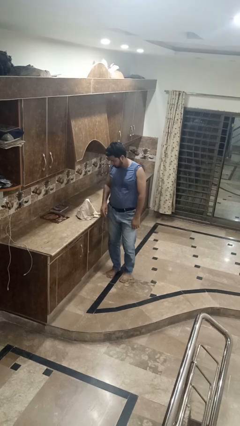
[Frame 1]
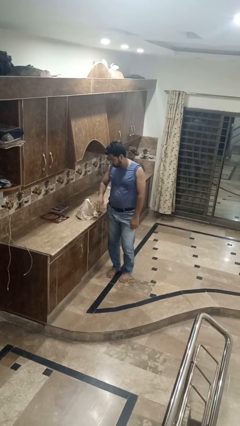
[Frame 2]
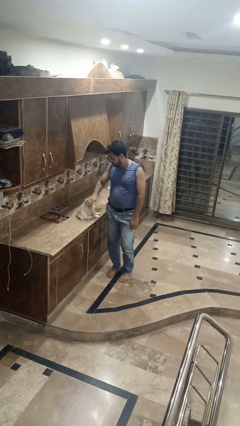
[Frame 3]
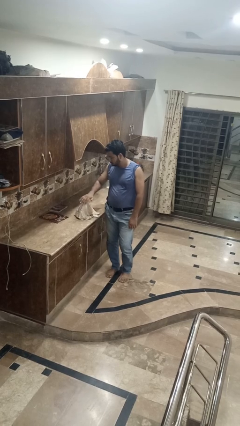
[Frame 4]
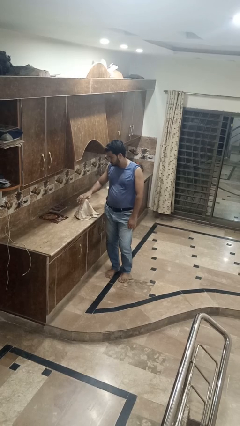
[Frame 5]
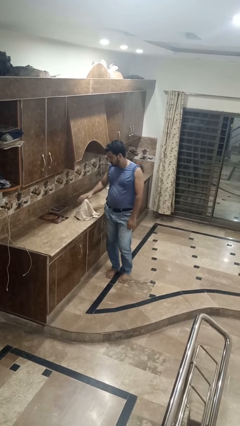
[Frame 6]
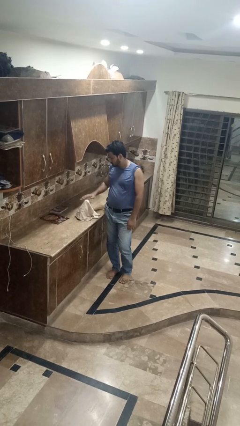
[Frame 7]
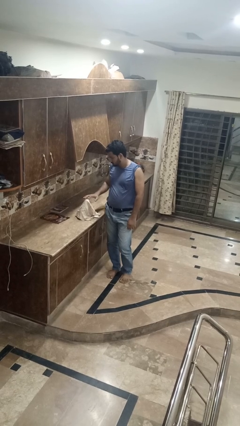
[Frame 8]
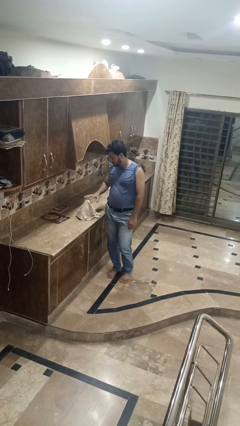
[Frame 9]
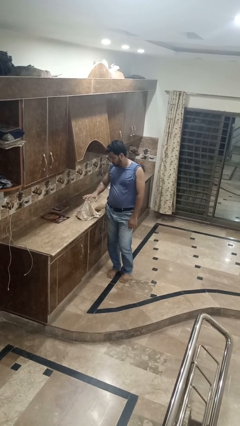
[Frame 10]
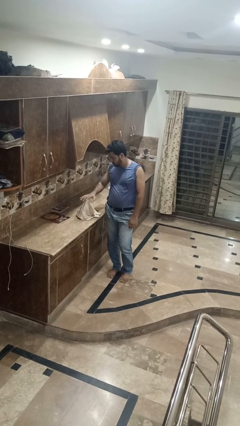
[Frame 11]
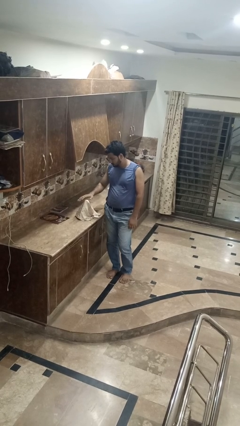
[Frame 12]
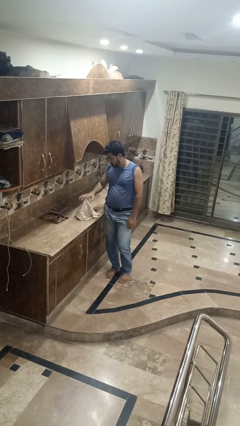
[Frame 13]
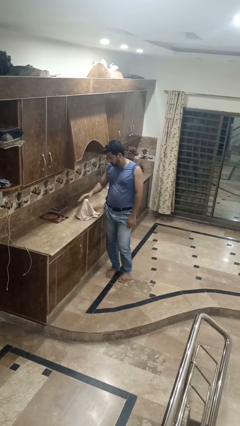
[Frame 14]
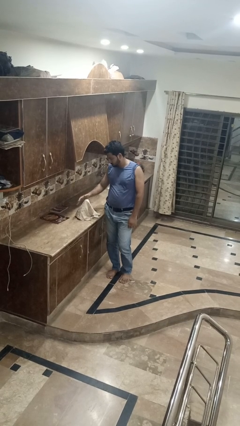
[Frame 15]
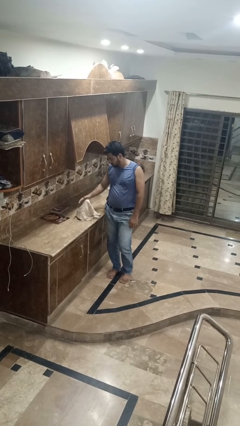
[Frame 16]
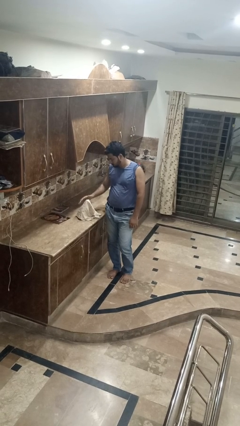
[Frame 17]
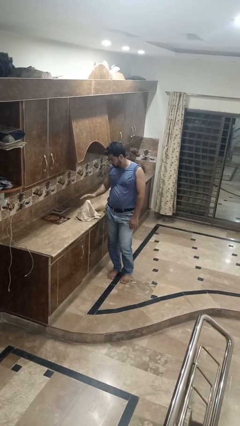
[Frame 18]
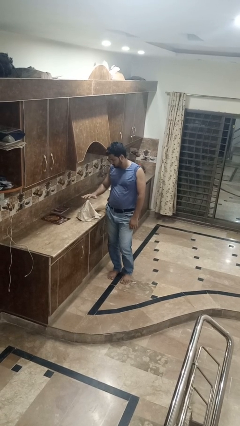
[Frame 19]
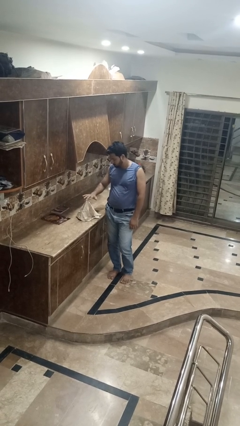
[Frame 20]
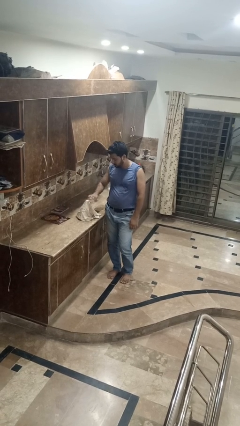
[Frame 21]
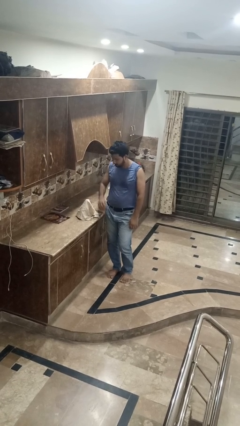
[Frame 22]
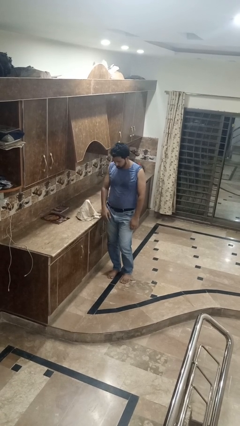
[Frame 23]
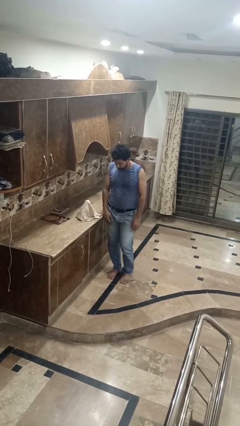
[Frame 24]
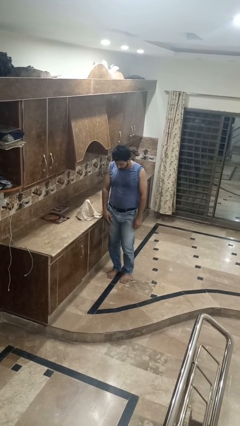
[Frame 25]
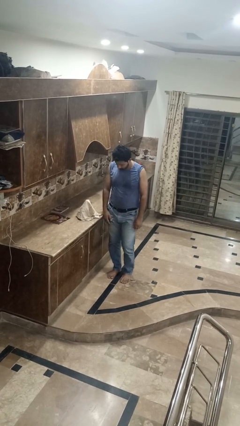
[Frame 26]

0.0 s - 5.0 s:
person waves hand over object

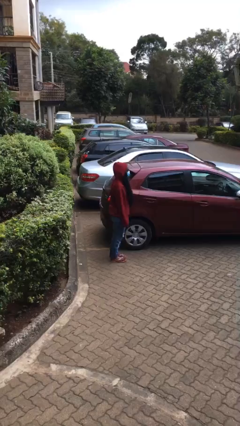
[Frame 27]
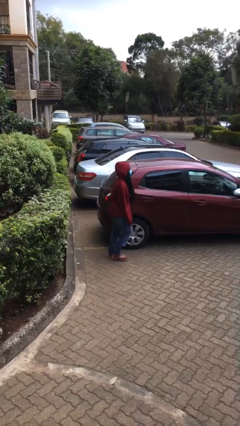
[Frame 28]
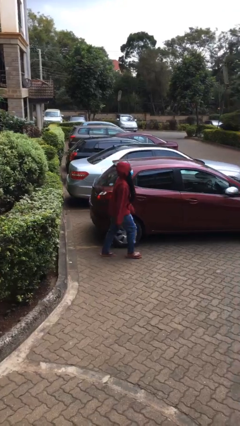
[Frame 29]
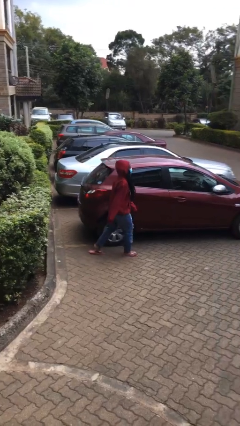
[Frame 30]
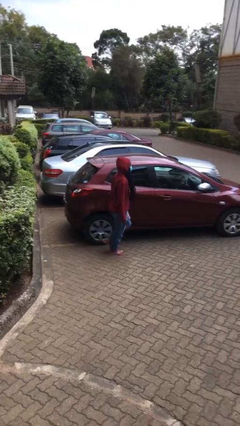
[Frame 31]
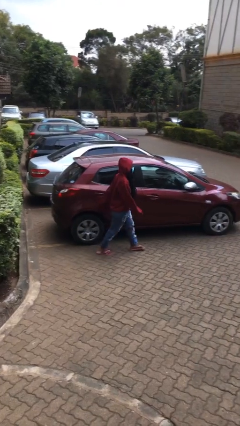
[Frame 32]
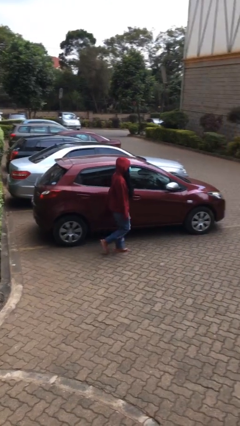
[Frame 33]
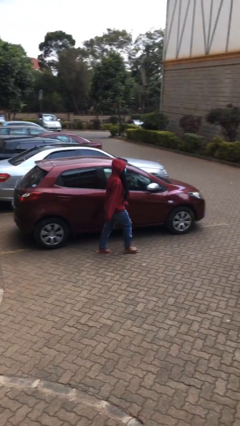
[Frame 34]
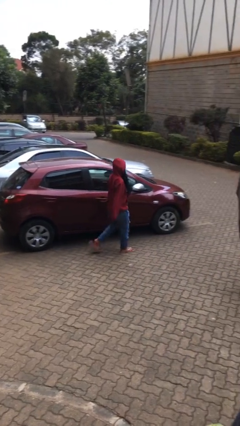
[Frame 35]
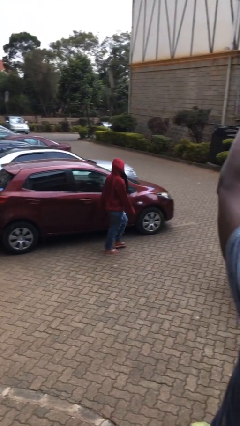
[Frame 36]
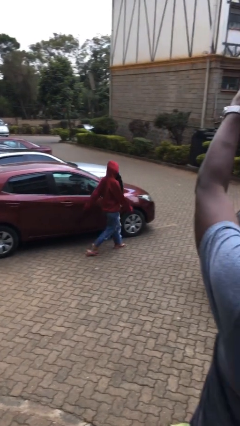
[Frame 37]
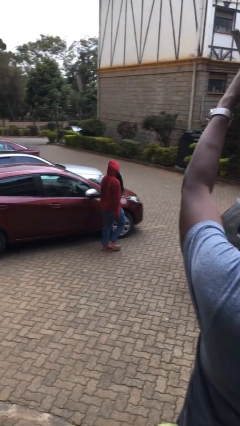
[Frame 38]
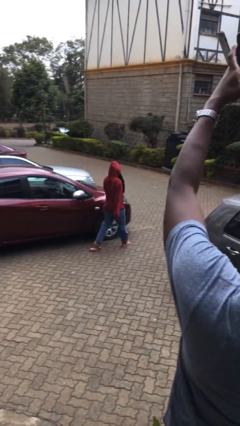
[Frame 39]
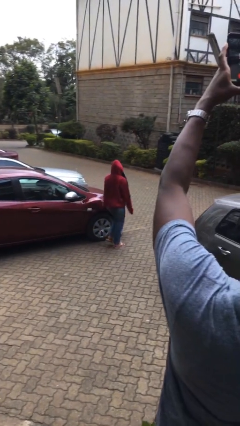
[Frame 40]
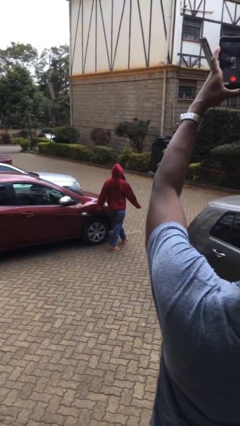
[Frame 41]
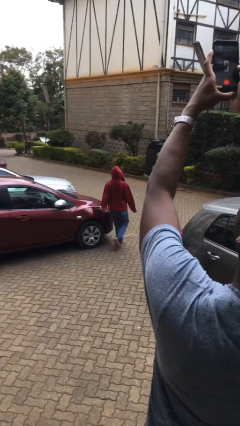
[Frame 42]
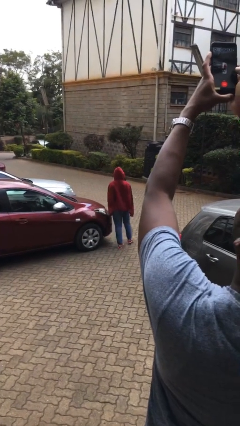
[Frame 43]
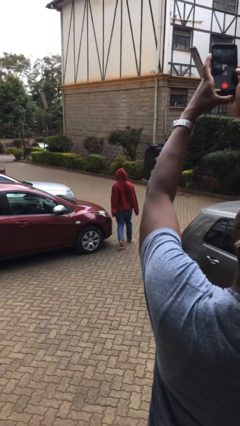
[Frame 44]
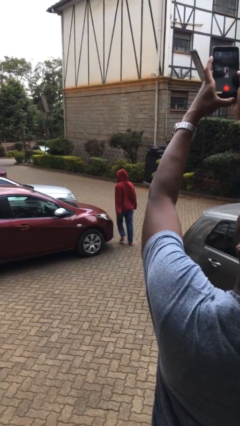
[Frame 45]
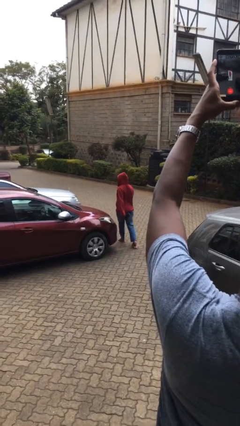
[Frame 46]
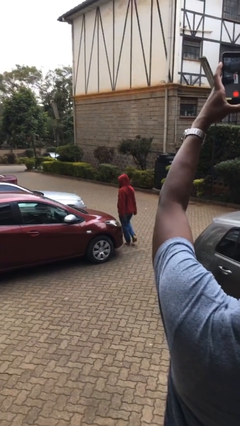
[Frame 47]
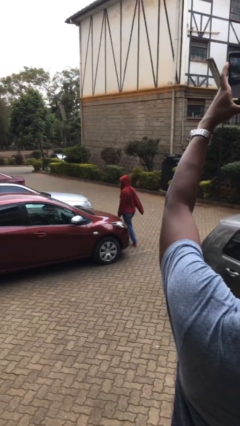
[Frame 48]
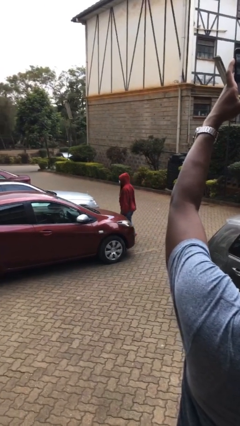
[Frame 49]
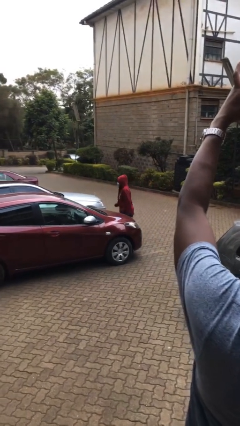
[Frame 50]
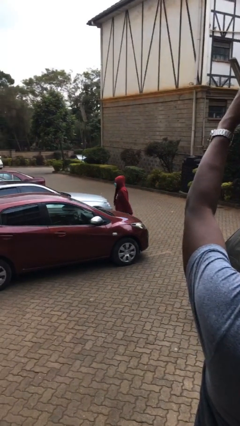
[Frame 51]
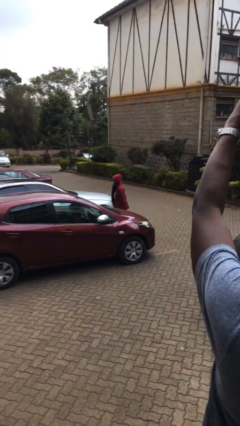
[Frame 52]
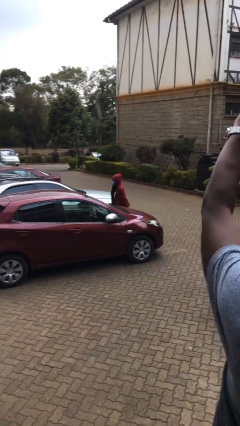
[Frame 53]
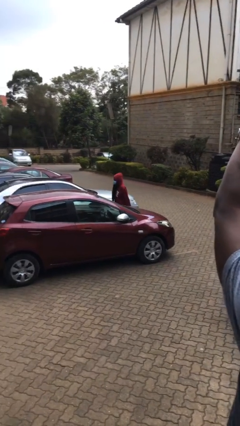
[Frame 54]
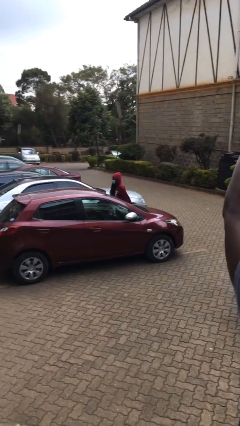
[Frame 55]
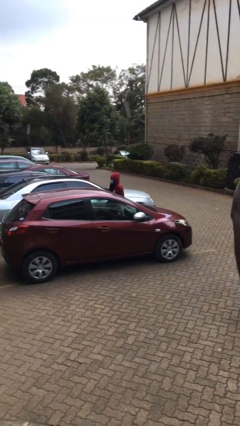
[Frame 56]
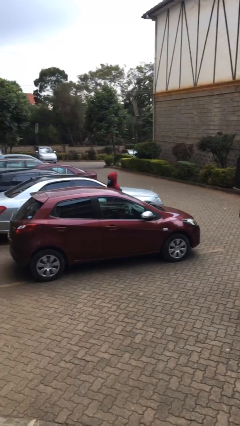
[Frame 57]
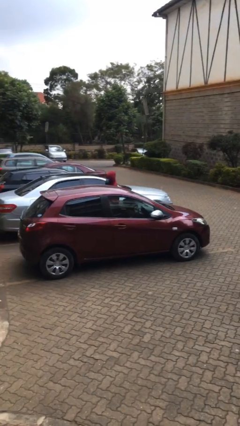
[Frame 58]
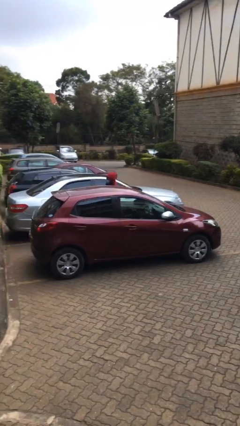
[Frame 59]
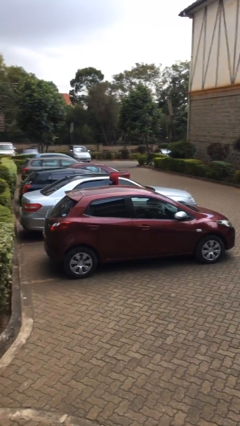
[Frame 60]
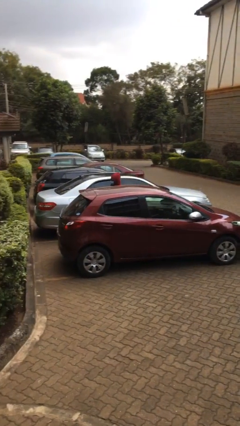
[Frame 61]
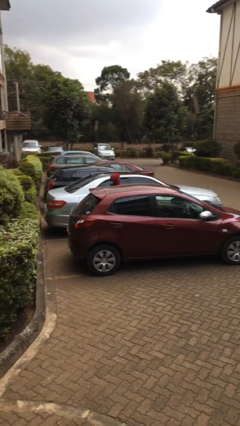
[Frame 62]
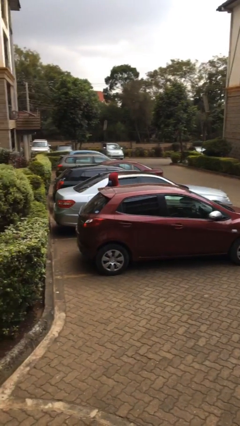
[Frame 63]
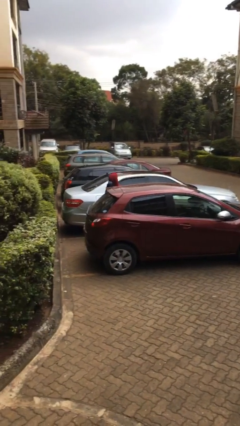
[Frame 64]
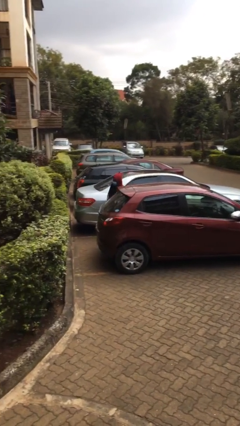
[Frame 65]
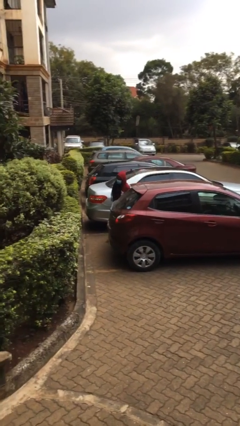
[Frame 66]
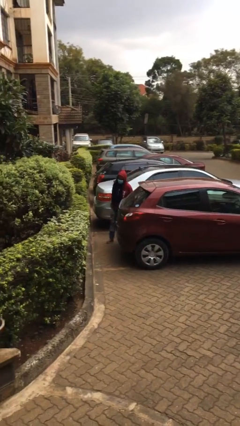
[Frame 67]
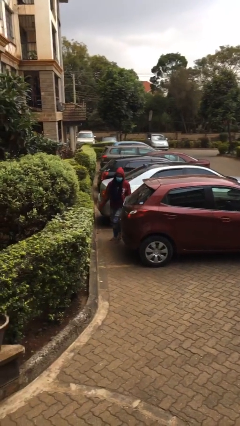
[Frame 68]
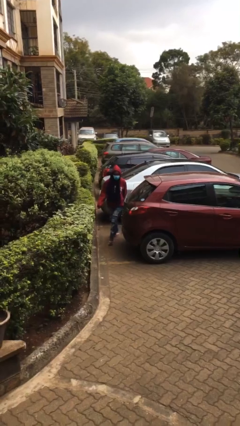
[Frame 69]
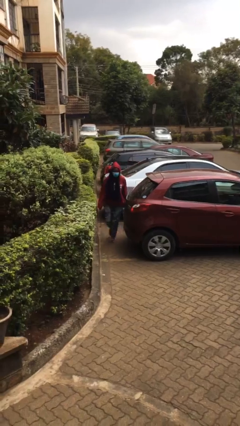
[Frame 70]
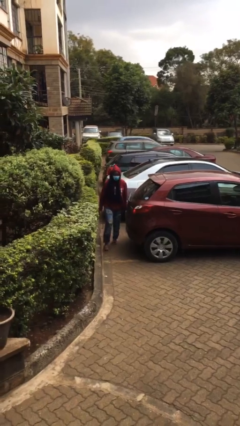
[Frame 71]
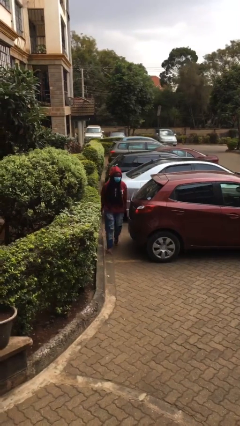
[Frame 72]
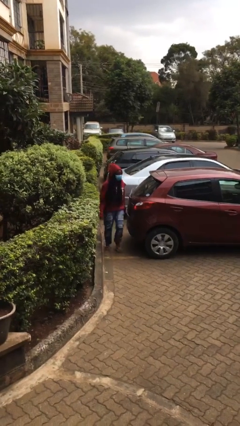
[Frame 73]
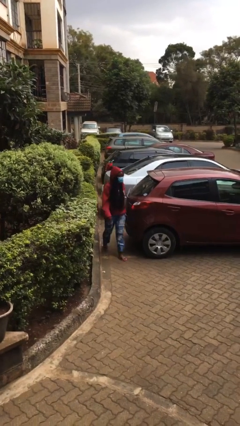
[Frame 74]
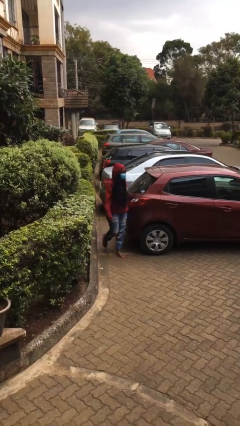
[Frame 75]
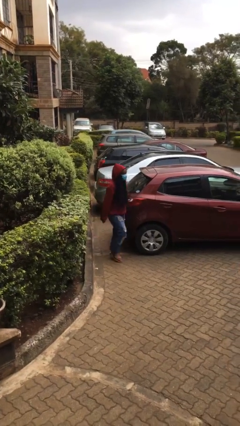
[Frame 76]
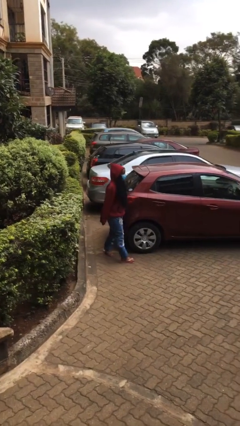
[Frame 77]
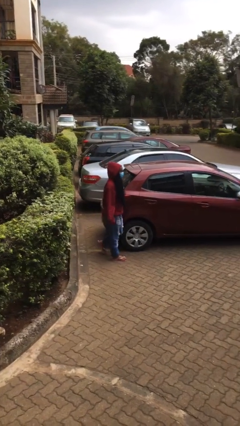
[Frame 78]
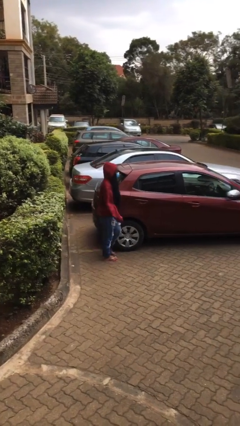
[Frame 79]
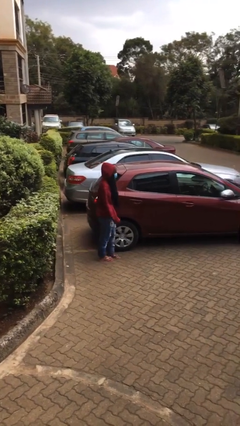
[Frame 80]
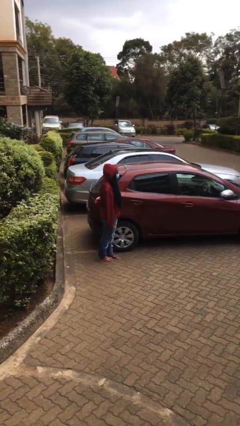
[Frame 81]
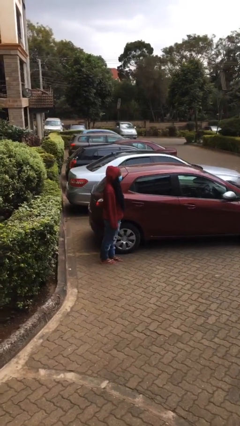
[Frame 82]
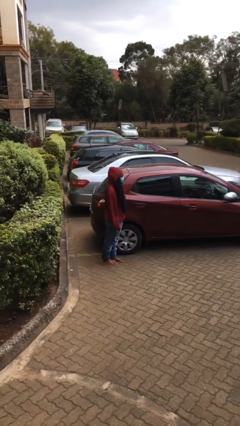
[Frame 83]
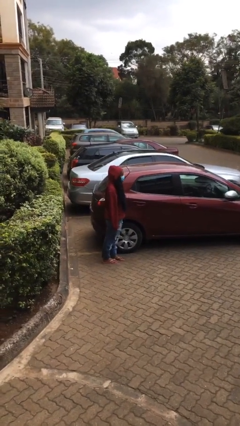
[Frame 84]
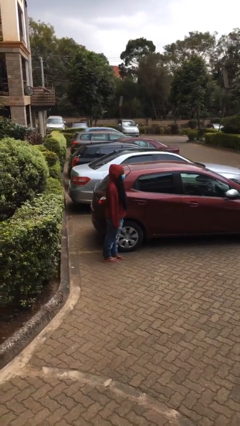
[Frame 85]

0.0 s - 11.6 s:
person walks around car

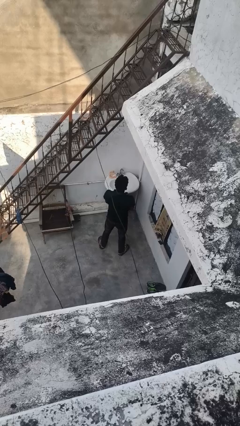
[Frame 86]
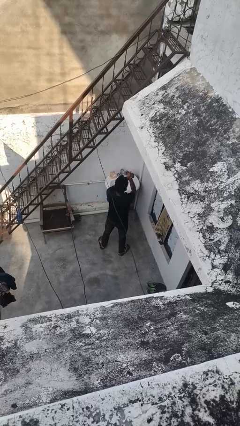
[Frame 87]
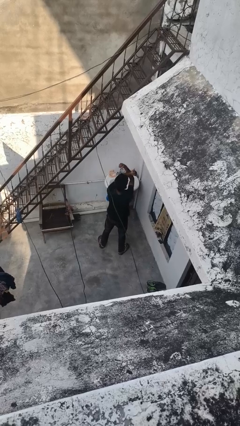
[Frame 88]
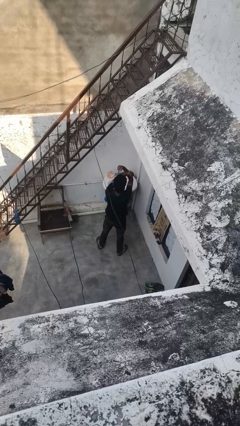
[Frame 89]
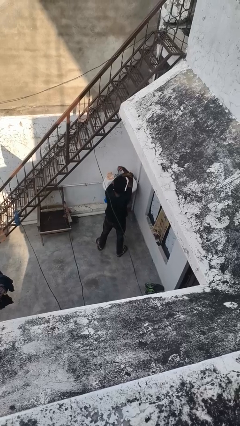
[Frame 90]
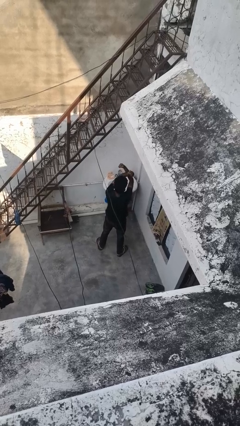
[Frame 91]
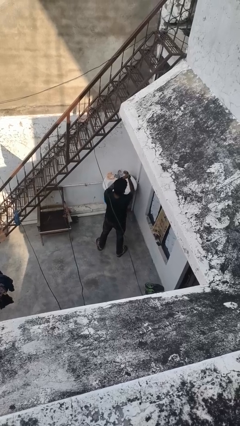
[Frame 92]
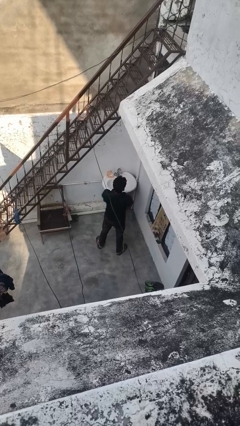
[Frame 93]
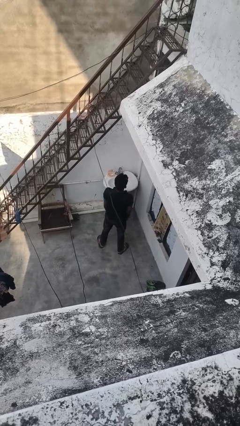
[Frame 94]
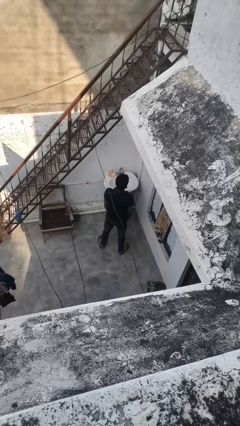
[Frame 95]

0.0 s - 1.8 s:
person gestures arms x
